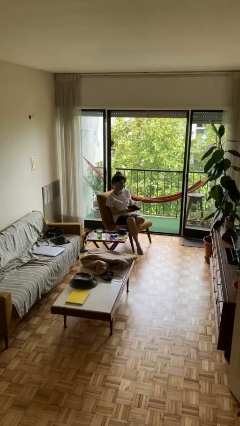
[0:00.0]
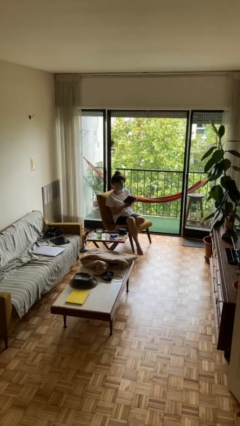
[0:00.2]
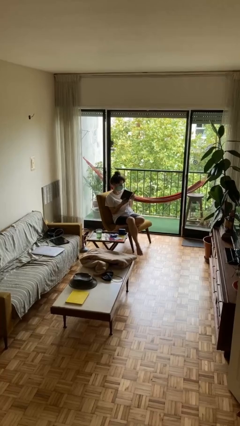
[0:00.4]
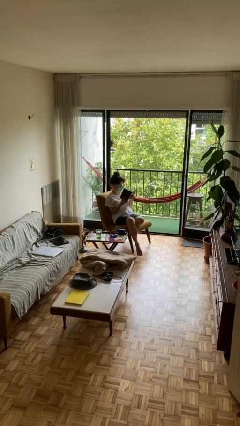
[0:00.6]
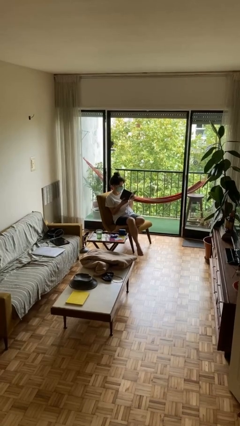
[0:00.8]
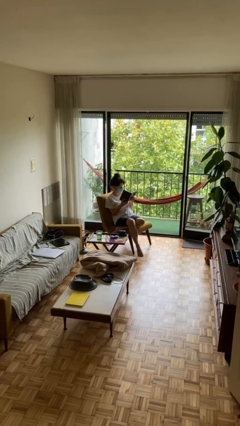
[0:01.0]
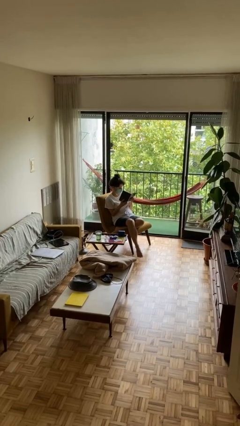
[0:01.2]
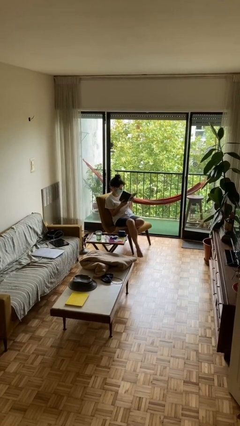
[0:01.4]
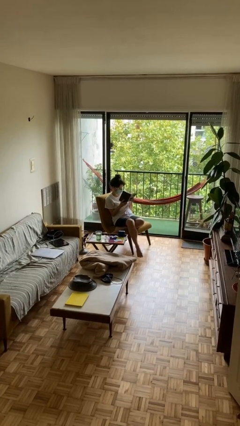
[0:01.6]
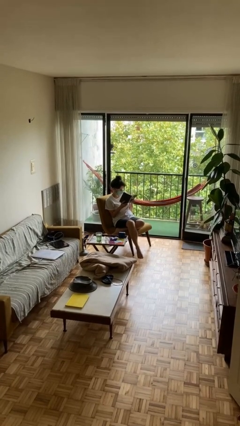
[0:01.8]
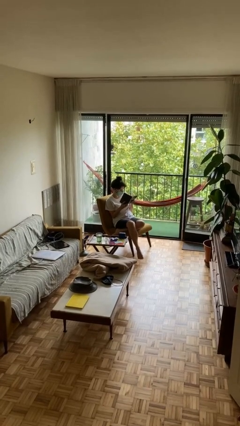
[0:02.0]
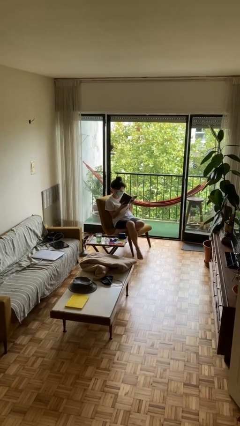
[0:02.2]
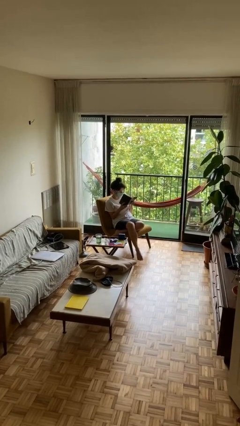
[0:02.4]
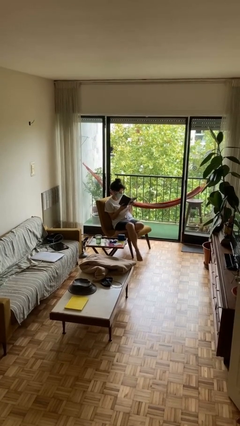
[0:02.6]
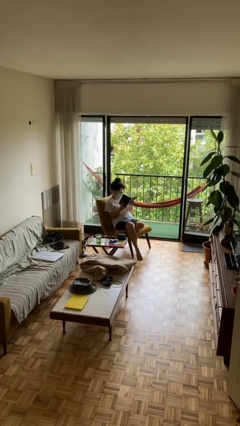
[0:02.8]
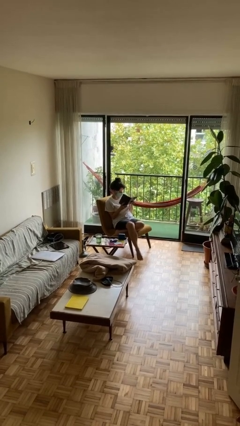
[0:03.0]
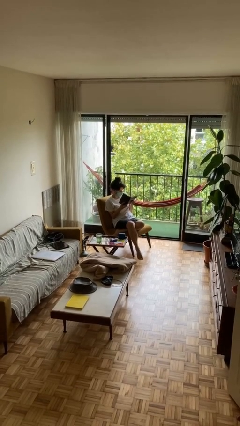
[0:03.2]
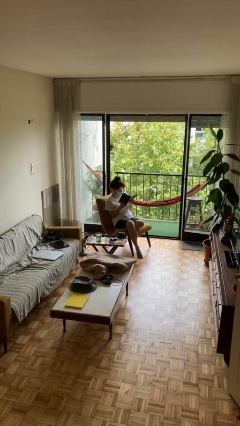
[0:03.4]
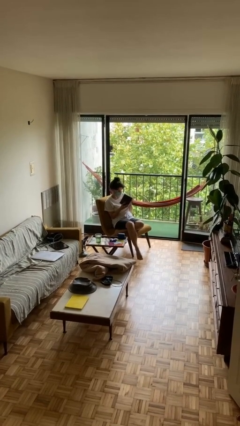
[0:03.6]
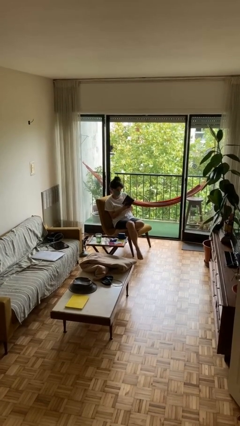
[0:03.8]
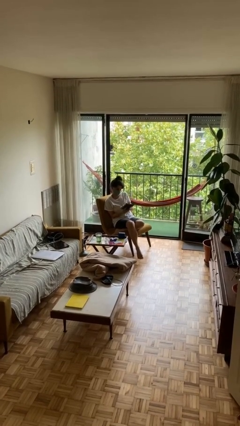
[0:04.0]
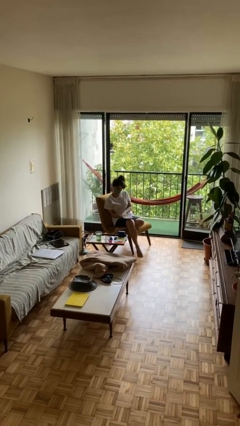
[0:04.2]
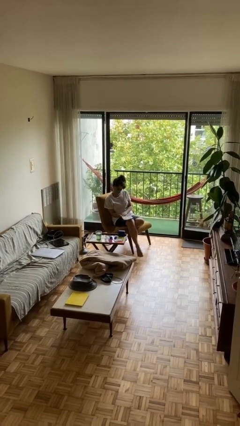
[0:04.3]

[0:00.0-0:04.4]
person reads document

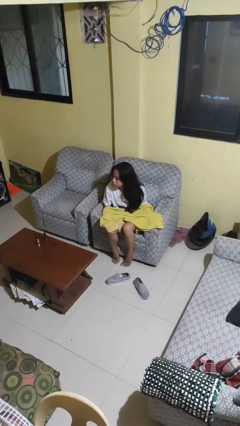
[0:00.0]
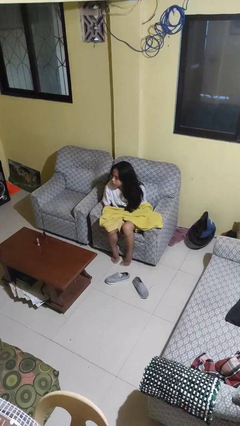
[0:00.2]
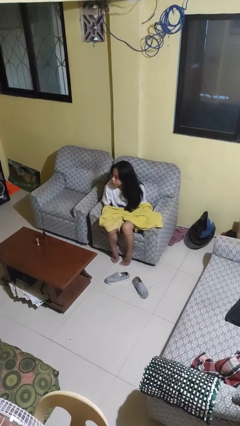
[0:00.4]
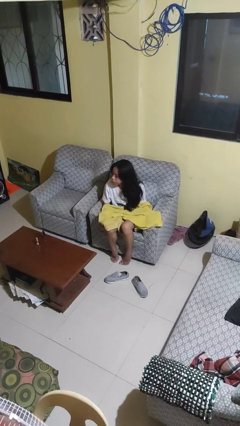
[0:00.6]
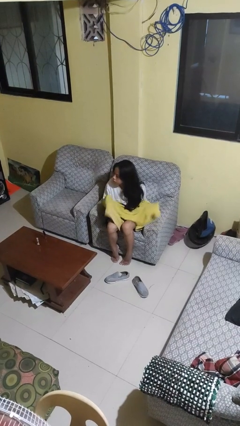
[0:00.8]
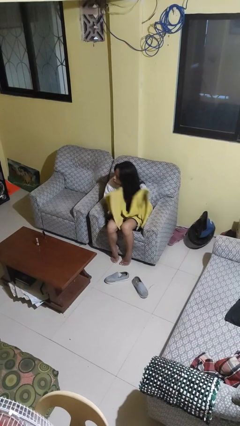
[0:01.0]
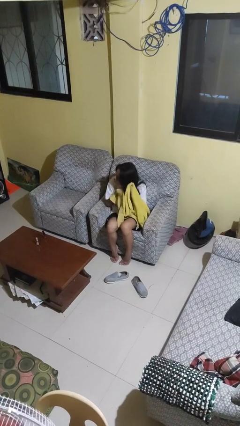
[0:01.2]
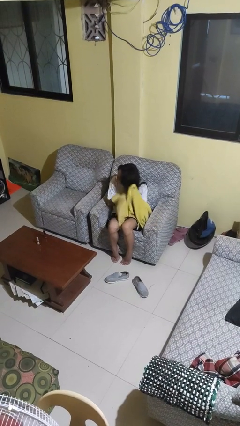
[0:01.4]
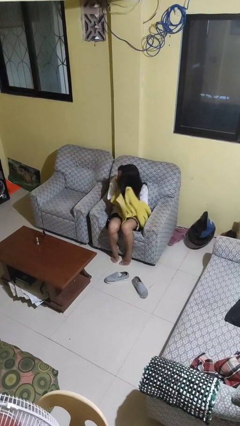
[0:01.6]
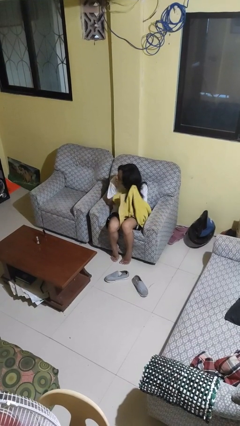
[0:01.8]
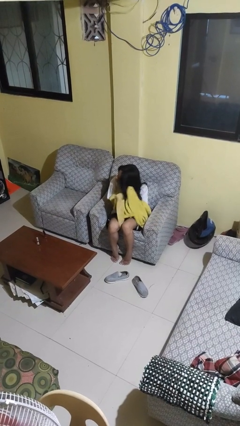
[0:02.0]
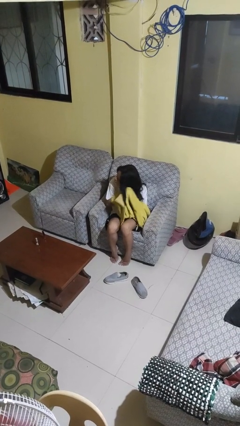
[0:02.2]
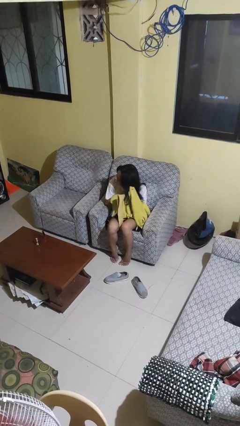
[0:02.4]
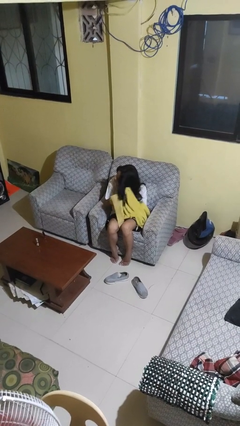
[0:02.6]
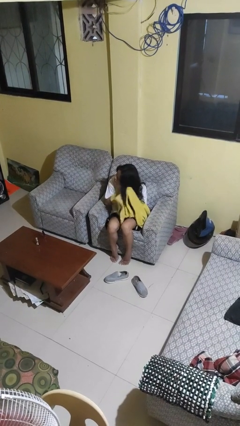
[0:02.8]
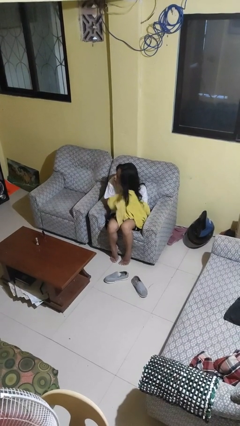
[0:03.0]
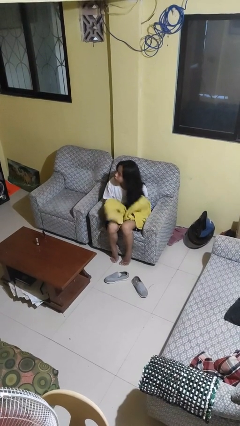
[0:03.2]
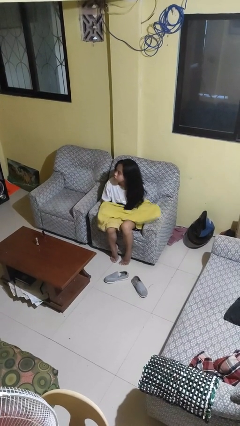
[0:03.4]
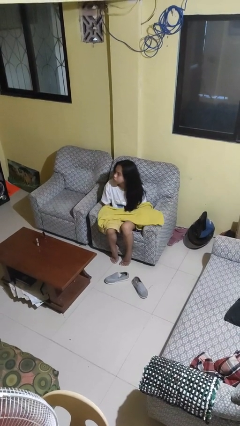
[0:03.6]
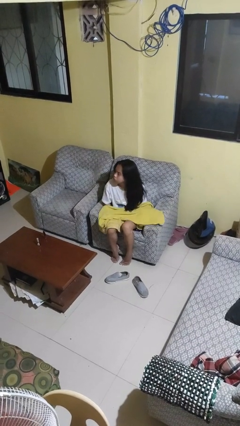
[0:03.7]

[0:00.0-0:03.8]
person dries hair with towel

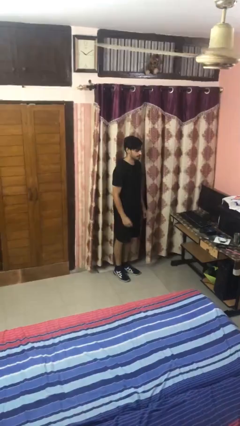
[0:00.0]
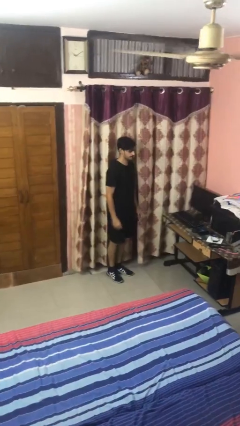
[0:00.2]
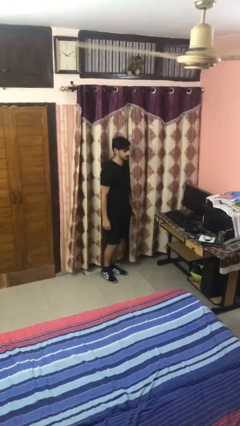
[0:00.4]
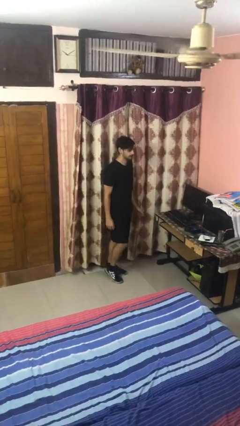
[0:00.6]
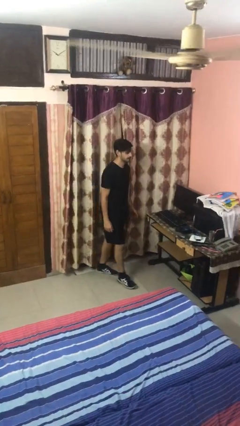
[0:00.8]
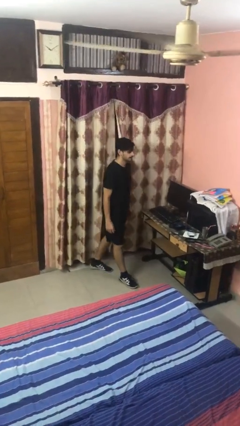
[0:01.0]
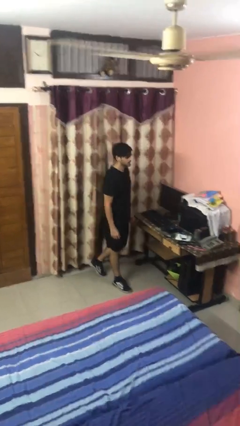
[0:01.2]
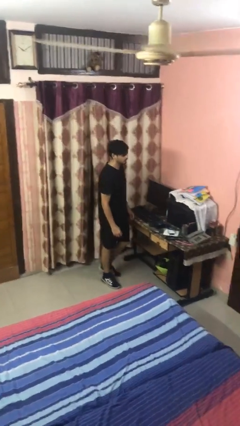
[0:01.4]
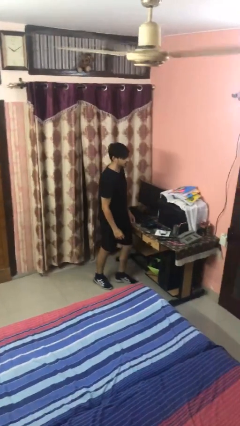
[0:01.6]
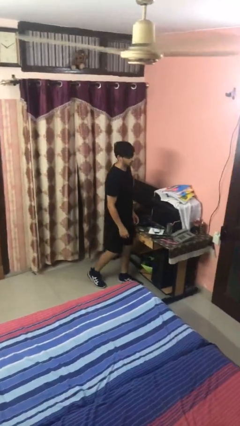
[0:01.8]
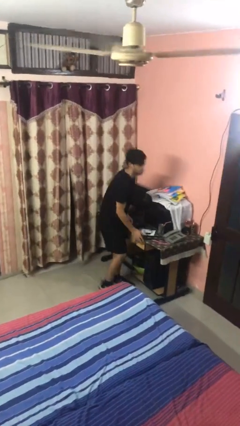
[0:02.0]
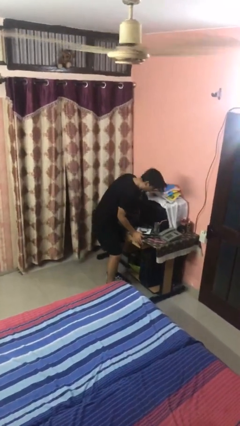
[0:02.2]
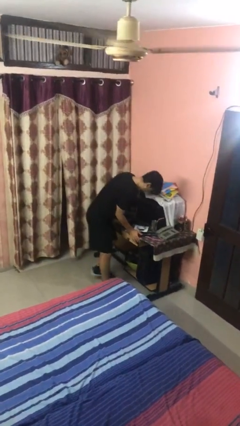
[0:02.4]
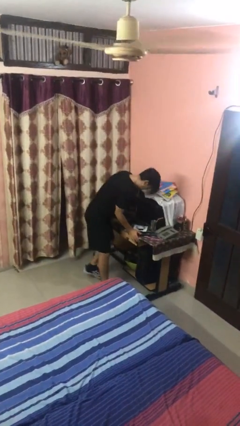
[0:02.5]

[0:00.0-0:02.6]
person bumps into table

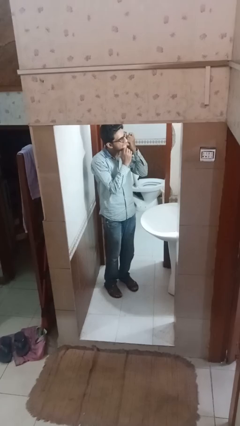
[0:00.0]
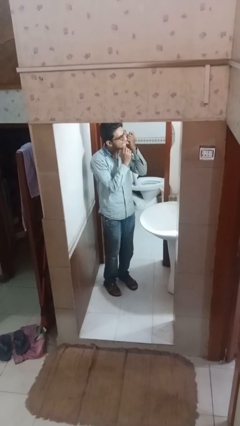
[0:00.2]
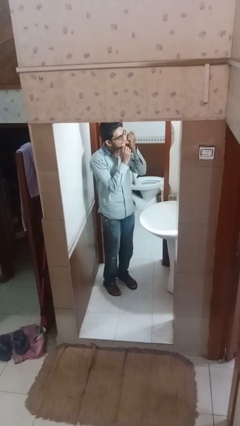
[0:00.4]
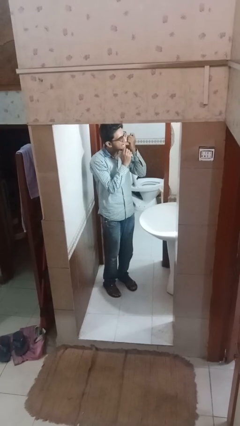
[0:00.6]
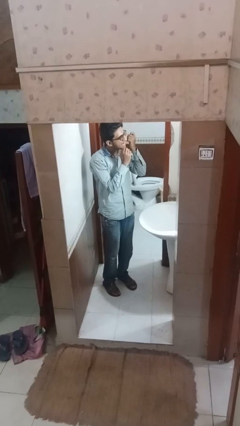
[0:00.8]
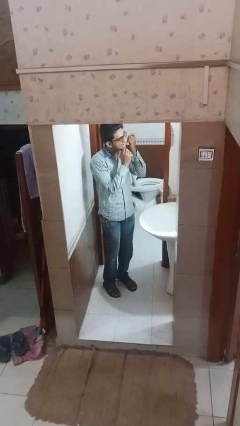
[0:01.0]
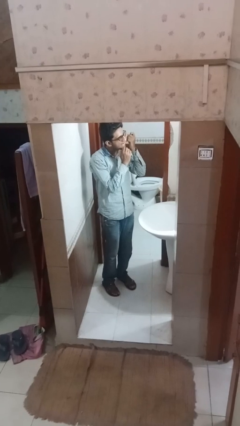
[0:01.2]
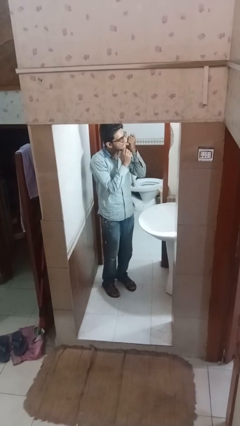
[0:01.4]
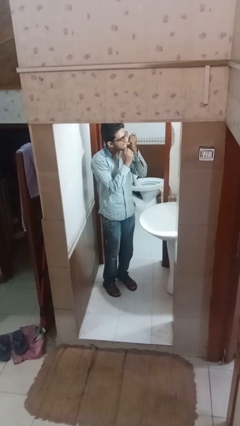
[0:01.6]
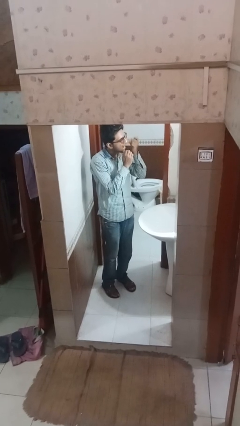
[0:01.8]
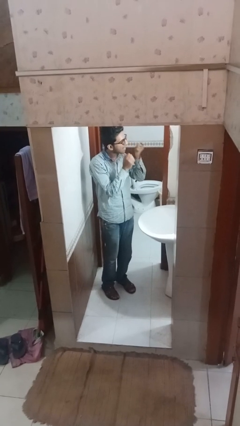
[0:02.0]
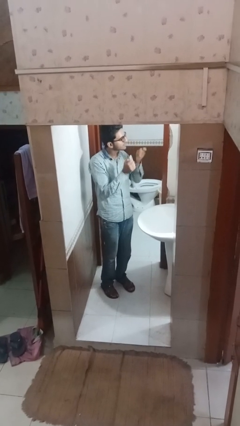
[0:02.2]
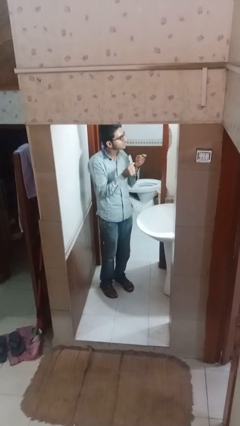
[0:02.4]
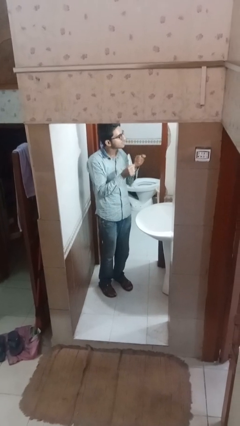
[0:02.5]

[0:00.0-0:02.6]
person flosses

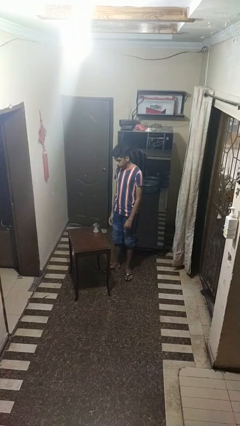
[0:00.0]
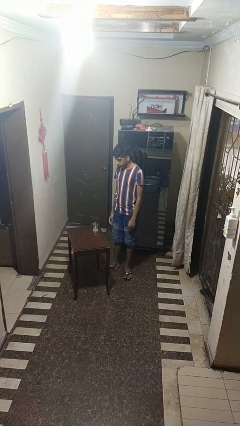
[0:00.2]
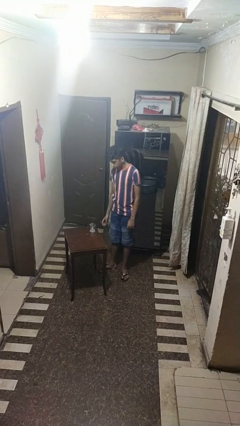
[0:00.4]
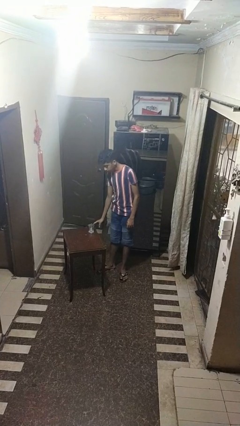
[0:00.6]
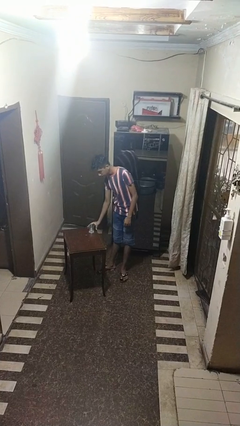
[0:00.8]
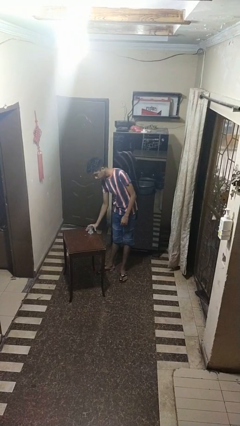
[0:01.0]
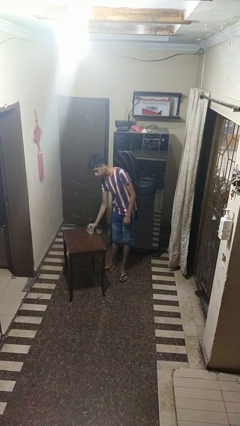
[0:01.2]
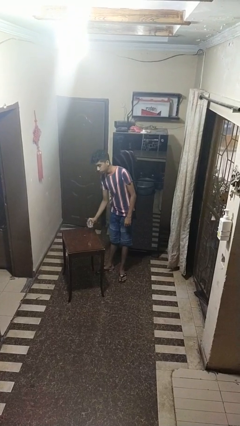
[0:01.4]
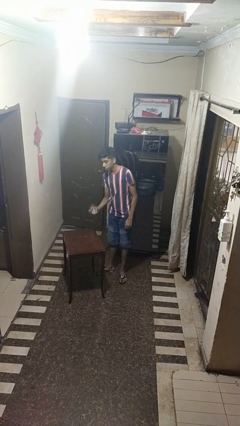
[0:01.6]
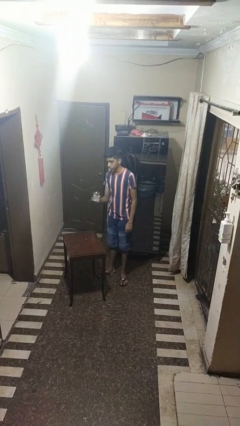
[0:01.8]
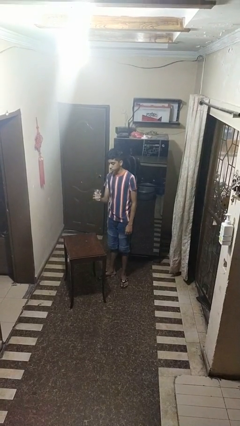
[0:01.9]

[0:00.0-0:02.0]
person picks up object from table

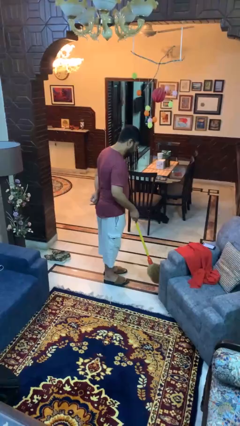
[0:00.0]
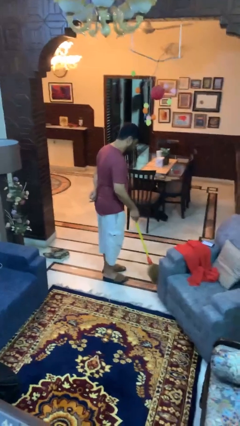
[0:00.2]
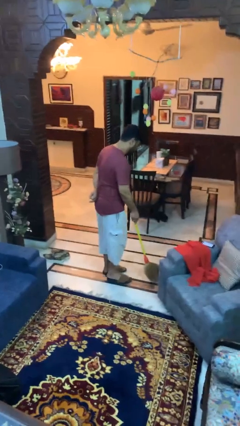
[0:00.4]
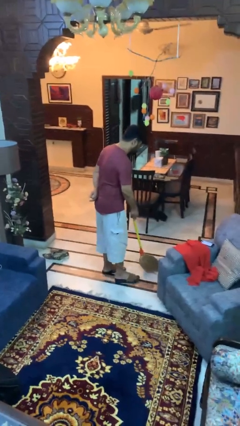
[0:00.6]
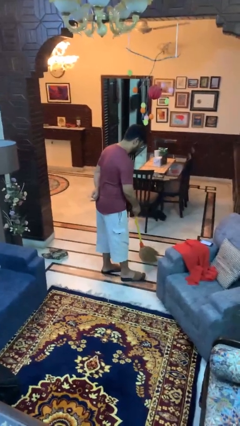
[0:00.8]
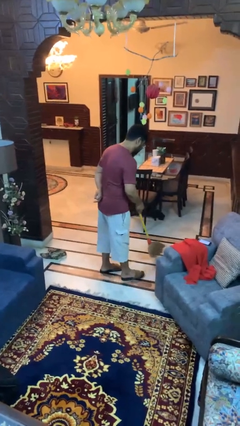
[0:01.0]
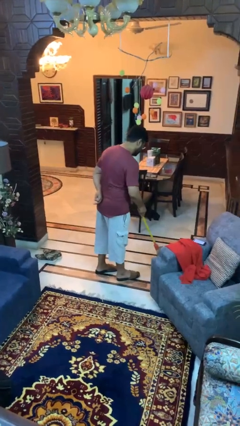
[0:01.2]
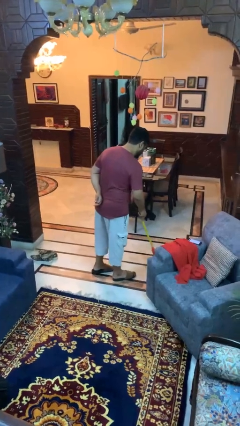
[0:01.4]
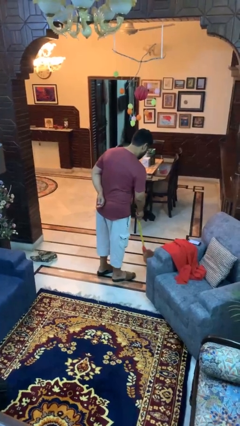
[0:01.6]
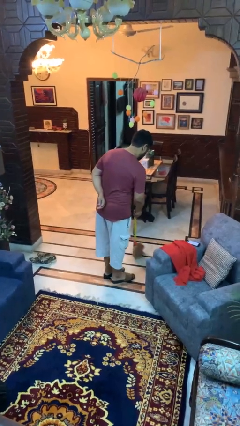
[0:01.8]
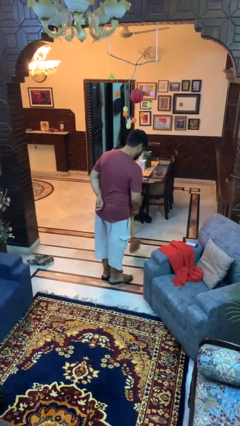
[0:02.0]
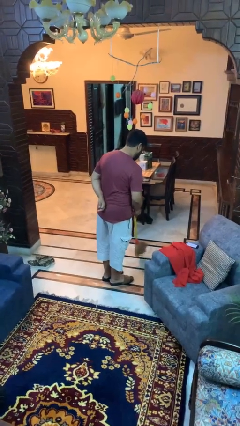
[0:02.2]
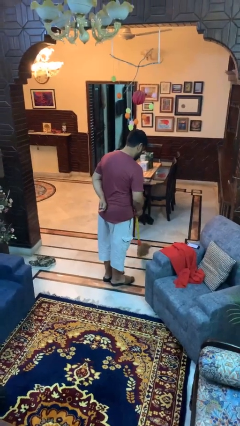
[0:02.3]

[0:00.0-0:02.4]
person sweeps floor
